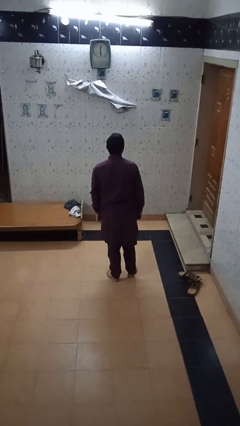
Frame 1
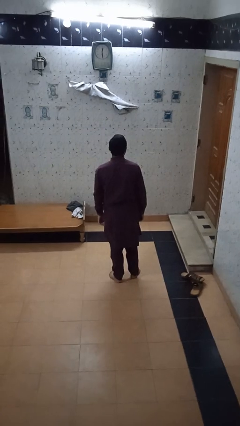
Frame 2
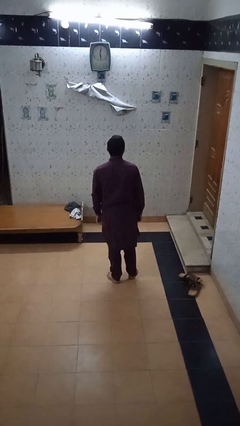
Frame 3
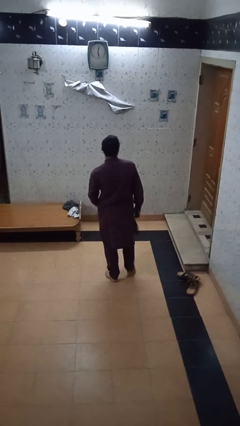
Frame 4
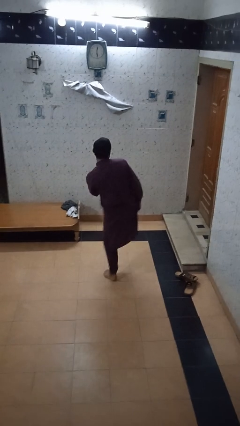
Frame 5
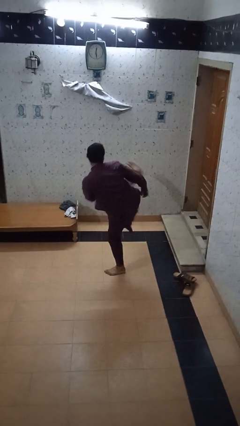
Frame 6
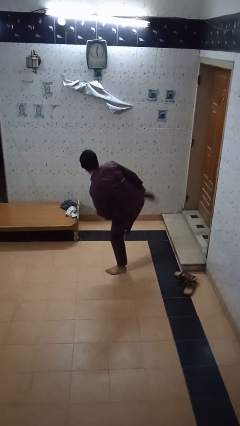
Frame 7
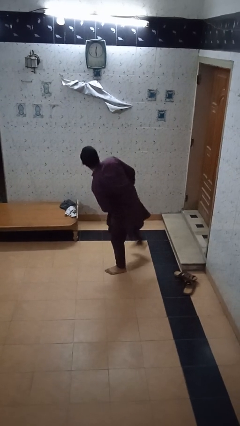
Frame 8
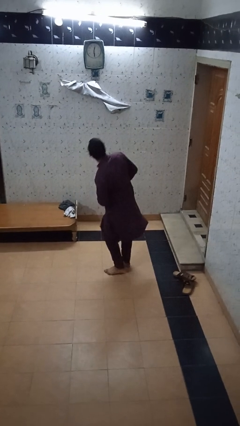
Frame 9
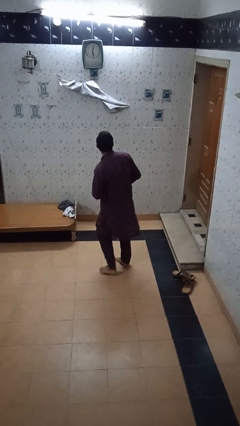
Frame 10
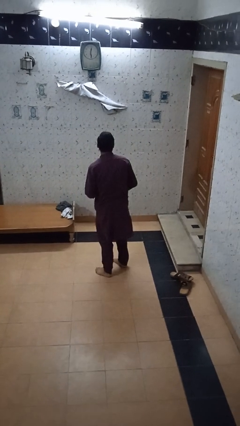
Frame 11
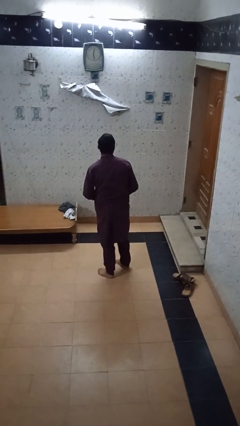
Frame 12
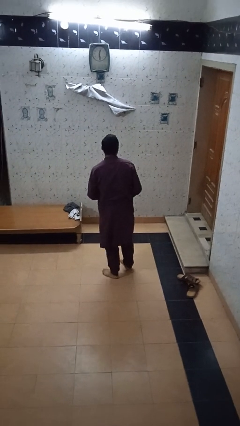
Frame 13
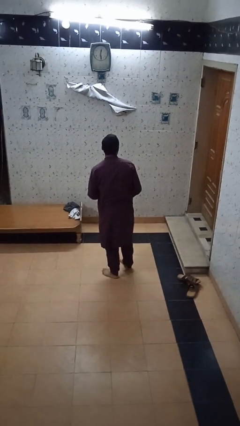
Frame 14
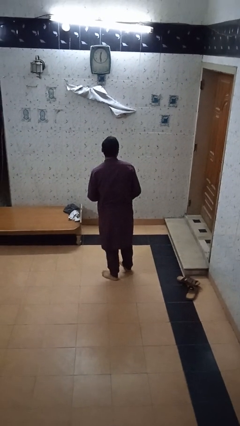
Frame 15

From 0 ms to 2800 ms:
person karate kicks

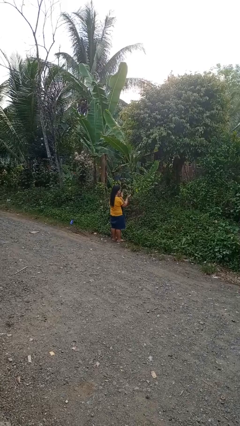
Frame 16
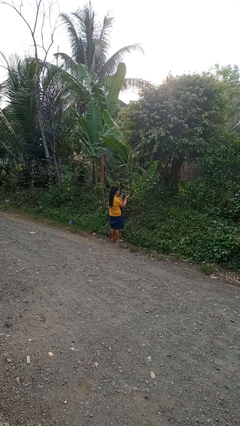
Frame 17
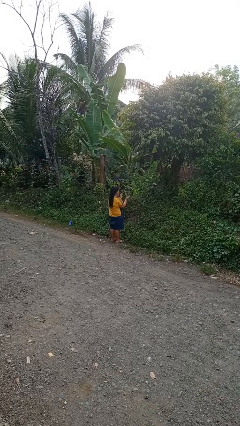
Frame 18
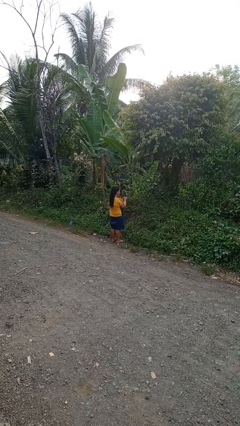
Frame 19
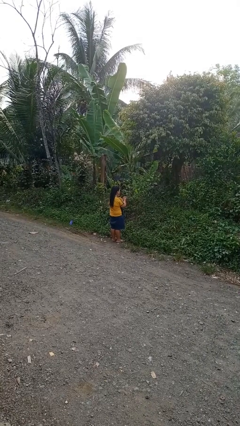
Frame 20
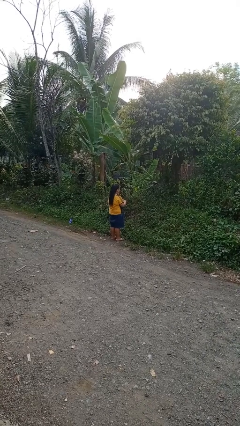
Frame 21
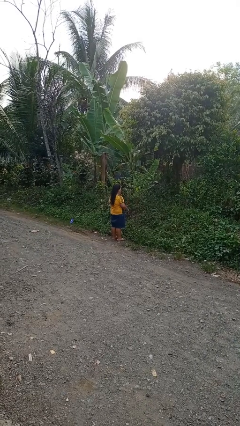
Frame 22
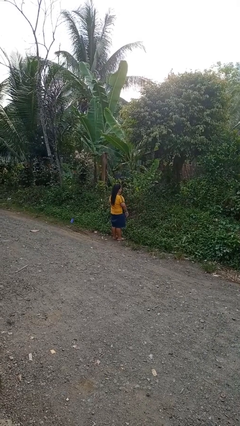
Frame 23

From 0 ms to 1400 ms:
person claps hands

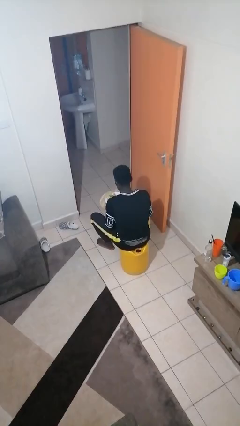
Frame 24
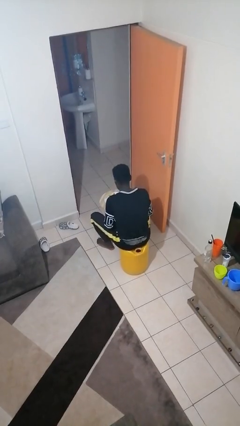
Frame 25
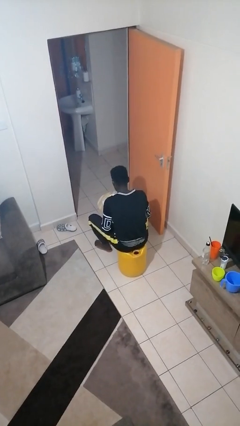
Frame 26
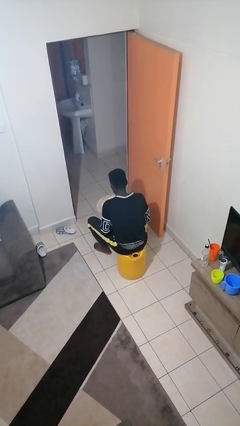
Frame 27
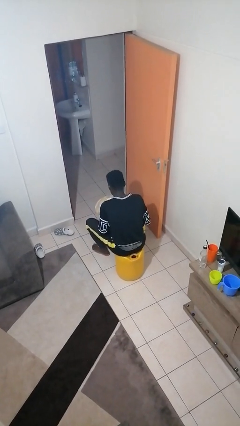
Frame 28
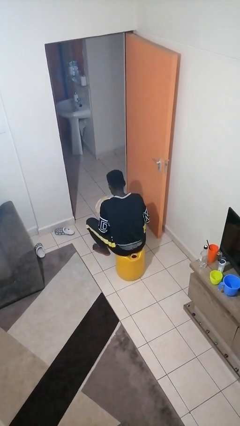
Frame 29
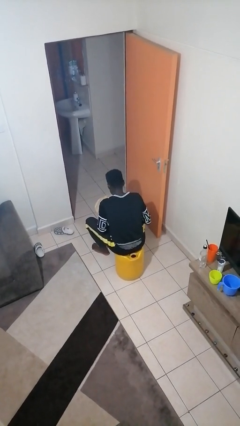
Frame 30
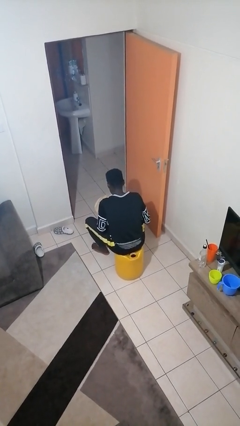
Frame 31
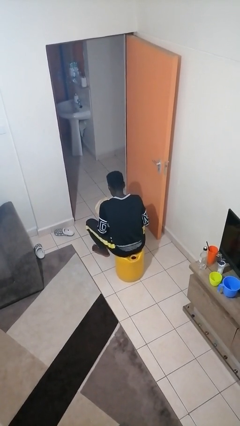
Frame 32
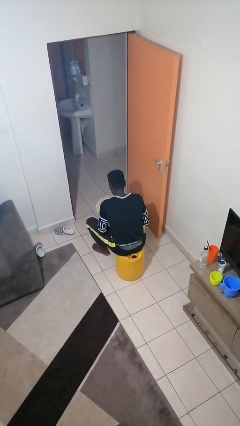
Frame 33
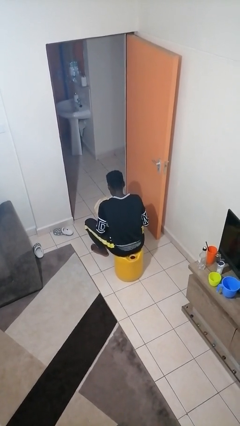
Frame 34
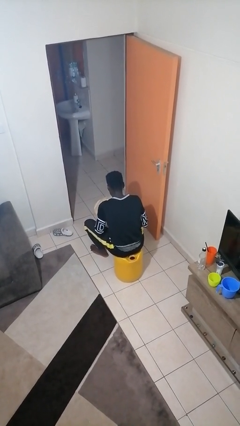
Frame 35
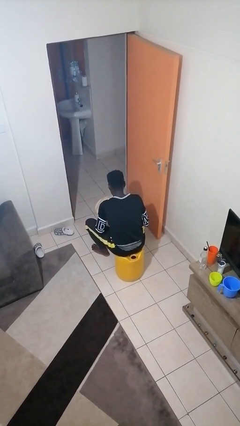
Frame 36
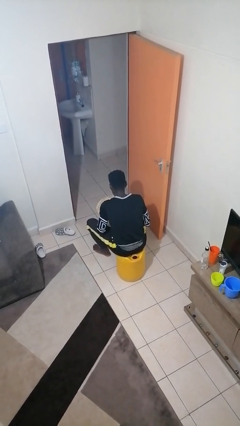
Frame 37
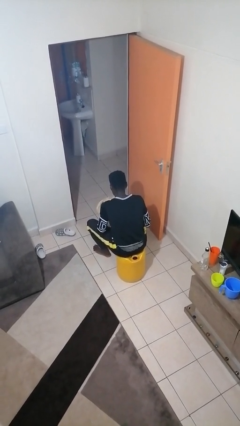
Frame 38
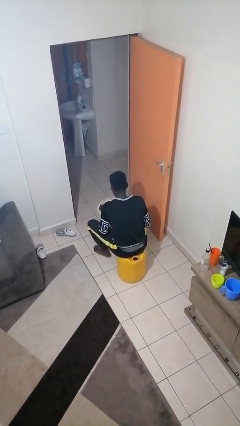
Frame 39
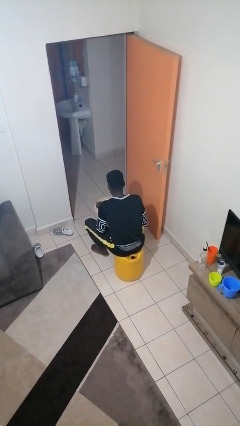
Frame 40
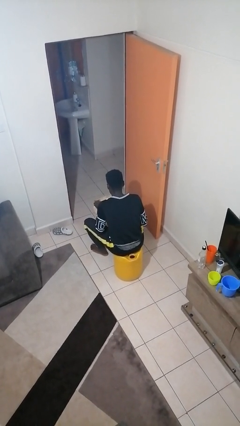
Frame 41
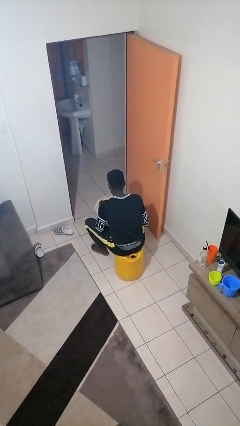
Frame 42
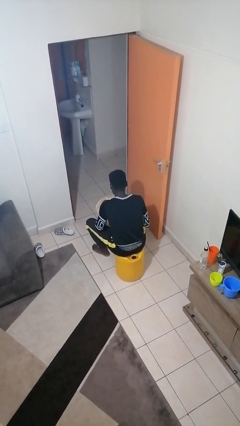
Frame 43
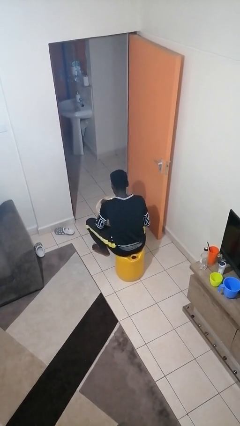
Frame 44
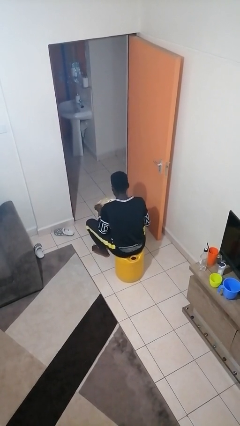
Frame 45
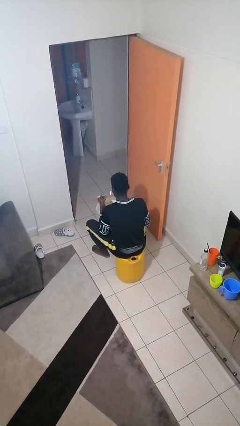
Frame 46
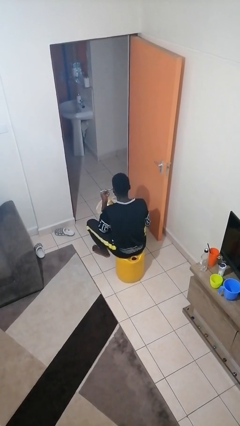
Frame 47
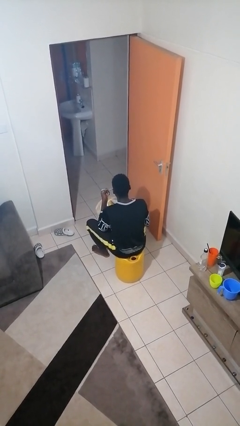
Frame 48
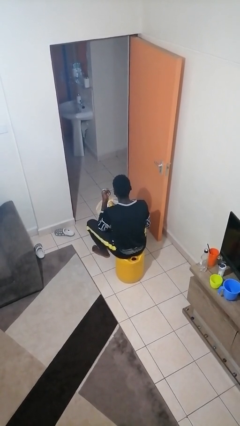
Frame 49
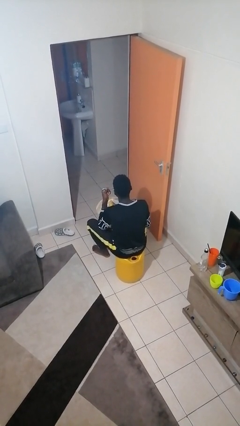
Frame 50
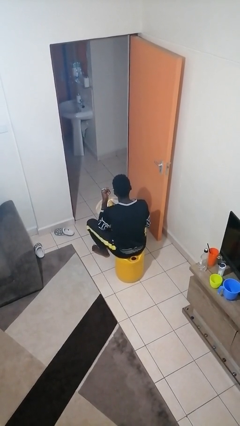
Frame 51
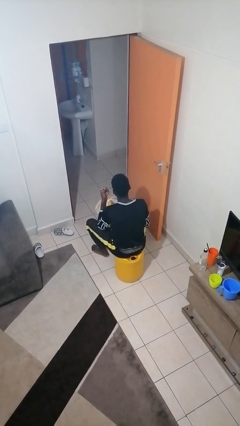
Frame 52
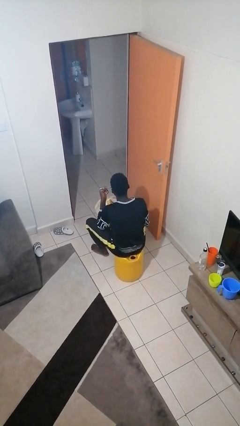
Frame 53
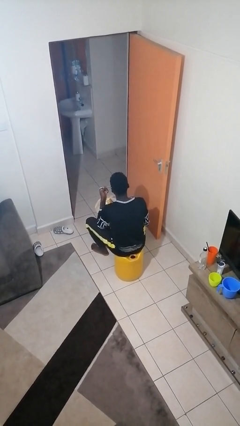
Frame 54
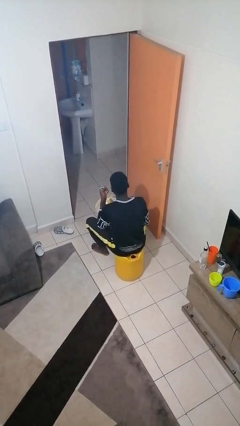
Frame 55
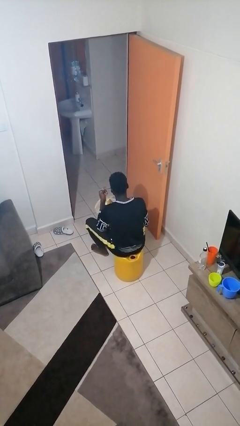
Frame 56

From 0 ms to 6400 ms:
person eats with utensil

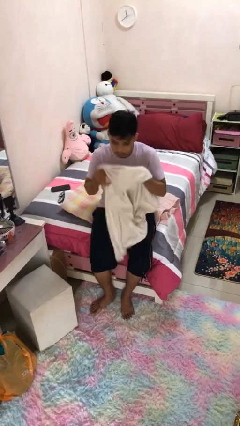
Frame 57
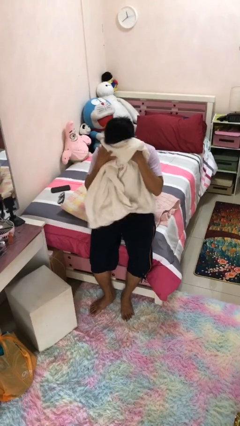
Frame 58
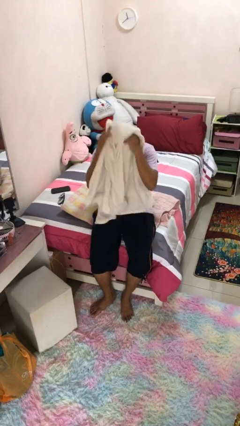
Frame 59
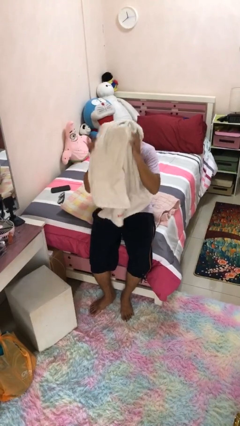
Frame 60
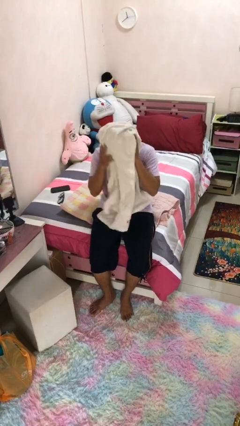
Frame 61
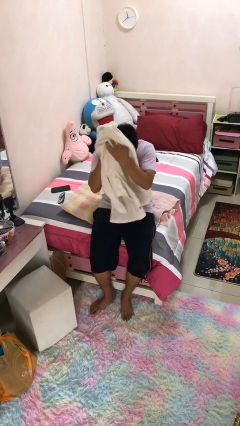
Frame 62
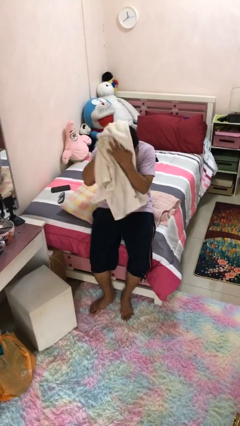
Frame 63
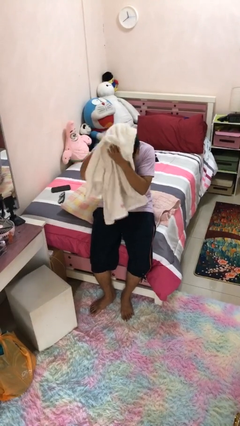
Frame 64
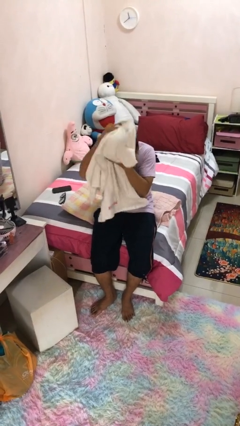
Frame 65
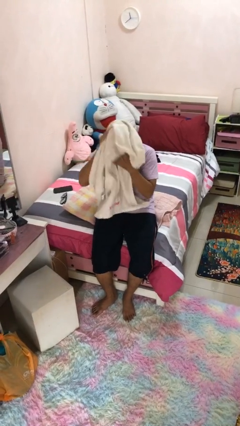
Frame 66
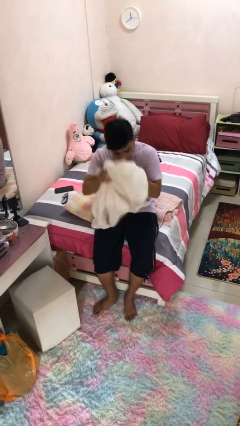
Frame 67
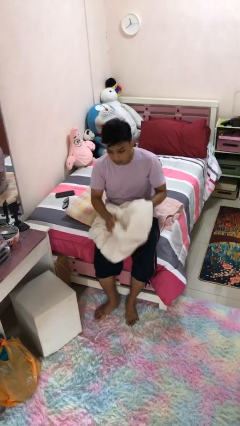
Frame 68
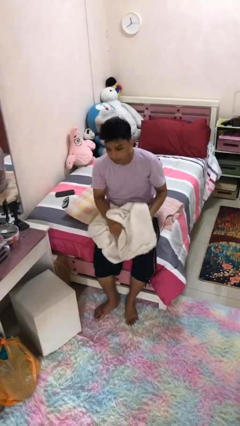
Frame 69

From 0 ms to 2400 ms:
person dries hair with towel

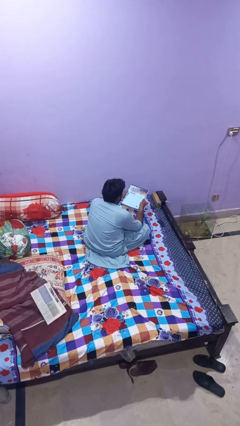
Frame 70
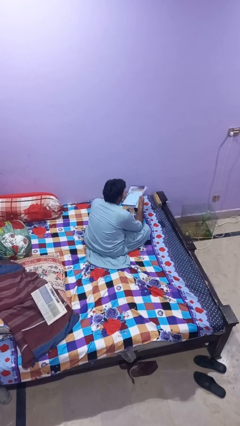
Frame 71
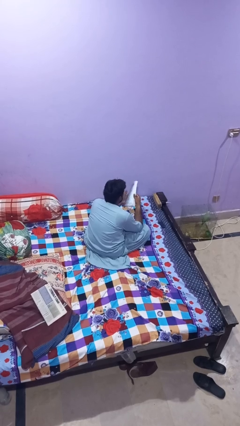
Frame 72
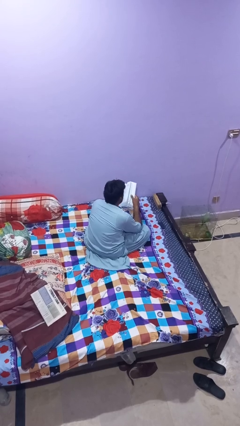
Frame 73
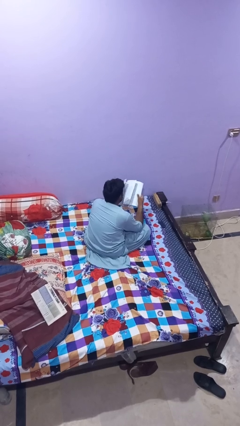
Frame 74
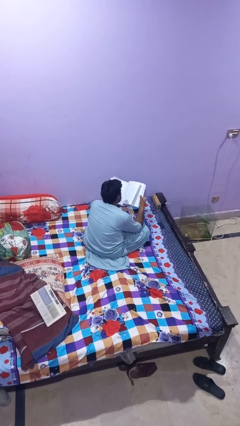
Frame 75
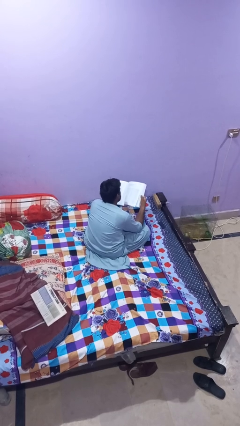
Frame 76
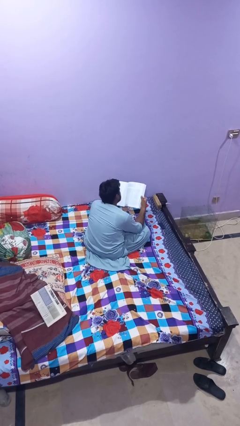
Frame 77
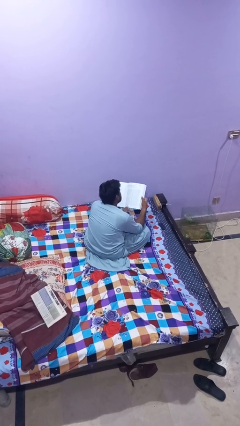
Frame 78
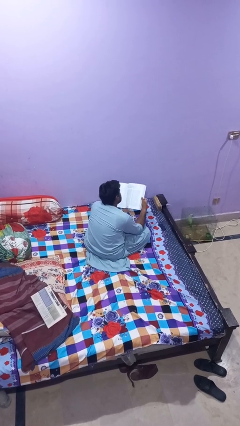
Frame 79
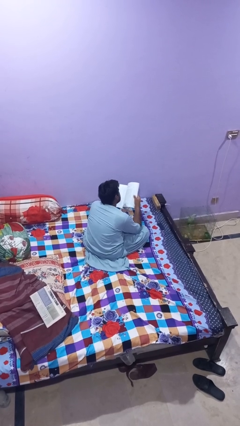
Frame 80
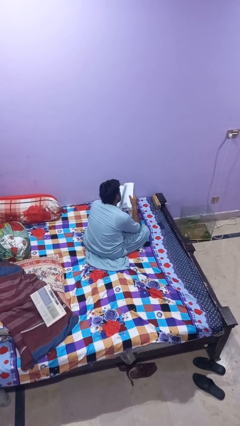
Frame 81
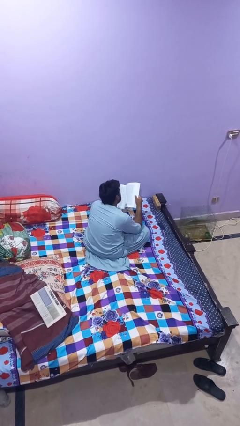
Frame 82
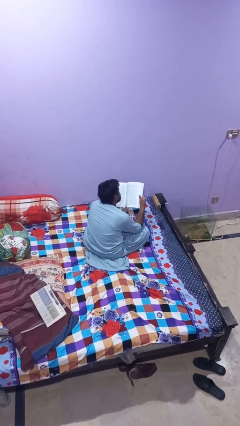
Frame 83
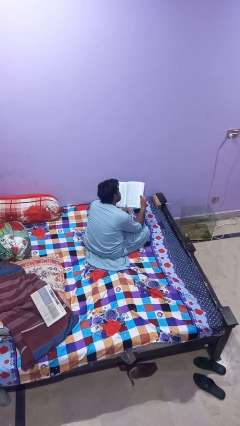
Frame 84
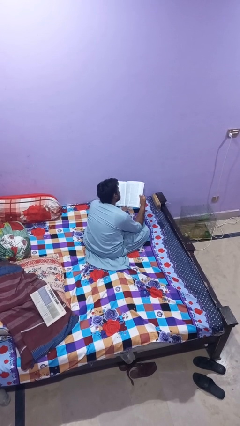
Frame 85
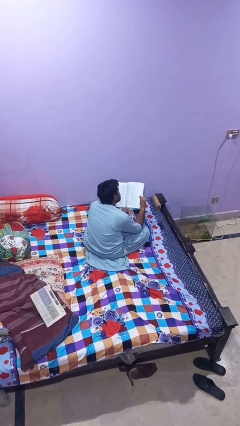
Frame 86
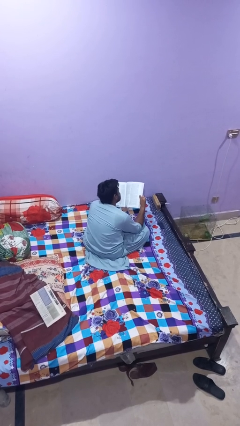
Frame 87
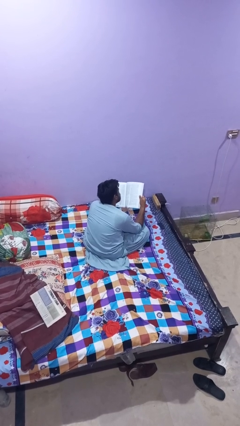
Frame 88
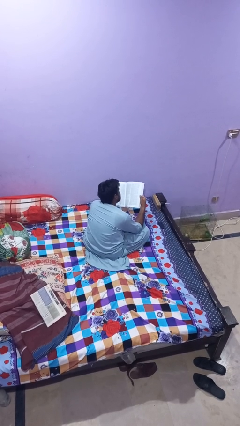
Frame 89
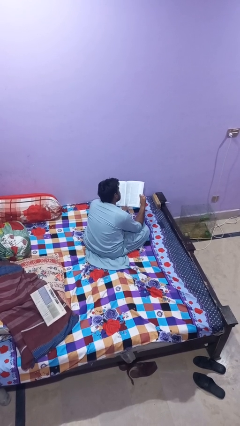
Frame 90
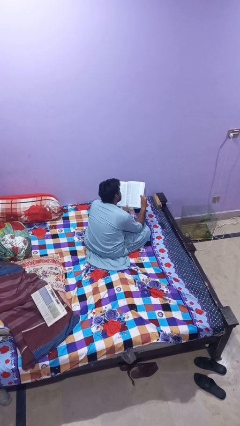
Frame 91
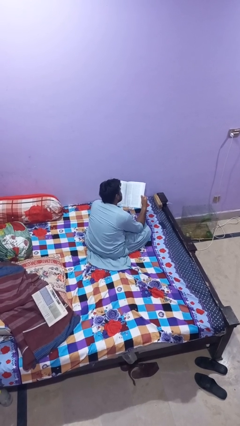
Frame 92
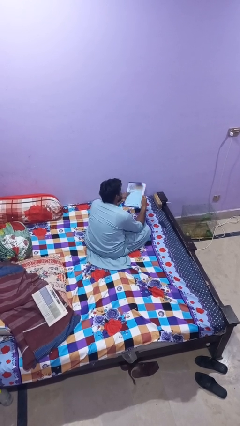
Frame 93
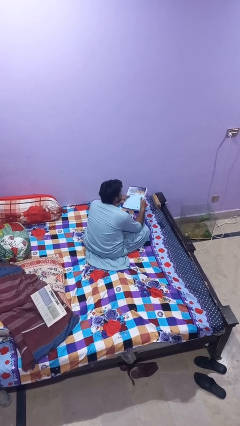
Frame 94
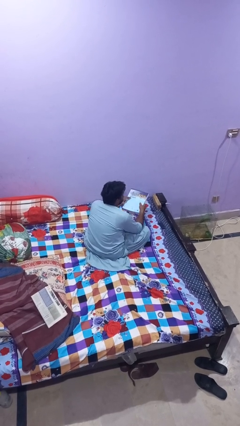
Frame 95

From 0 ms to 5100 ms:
person reads magazine
